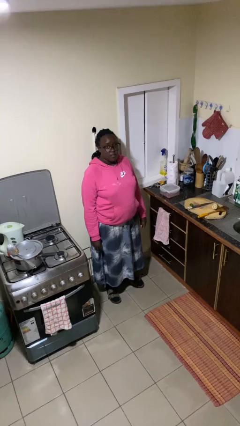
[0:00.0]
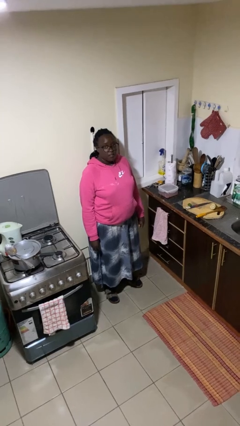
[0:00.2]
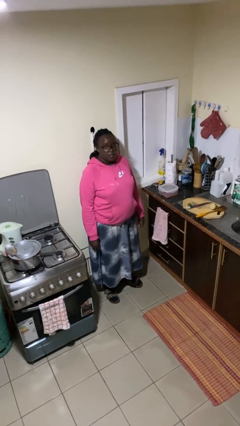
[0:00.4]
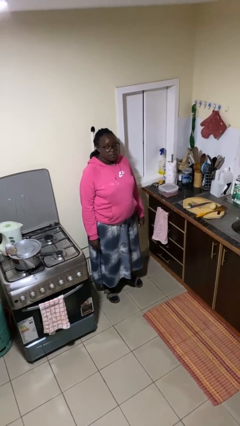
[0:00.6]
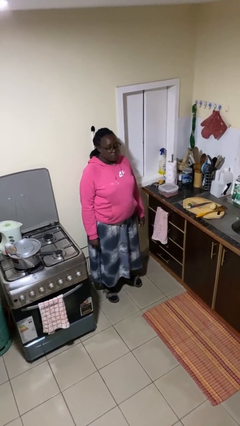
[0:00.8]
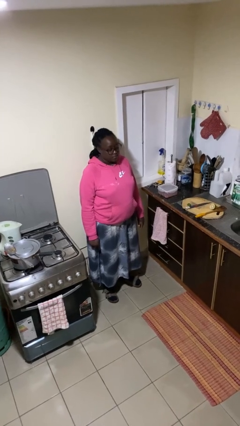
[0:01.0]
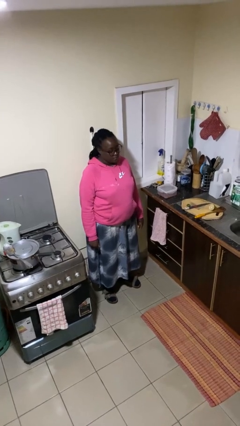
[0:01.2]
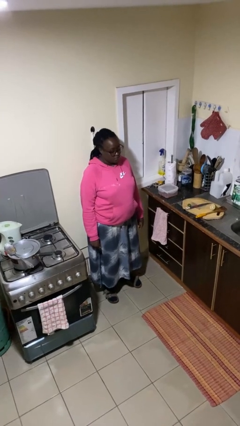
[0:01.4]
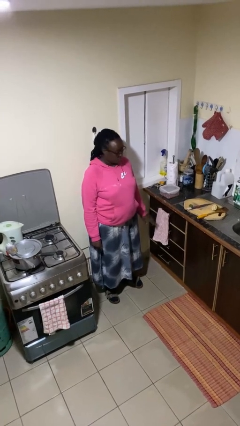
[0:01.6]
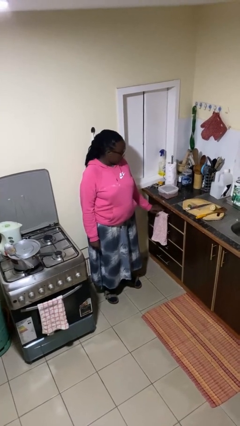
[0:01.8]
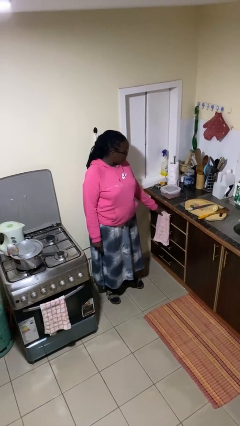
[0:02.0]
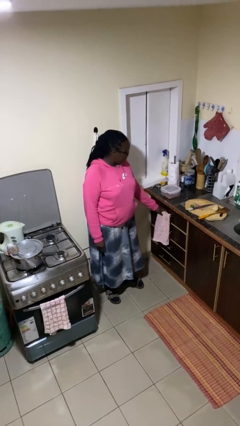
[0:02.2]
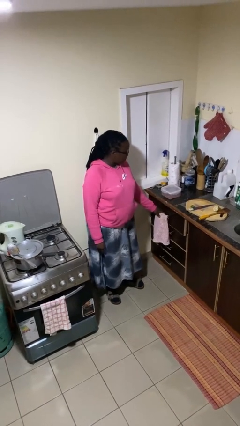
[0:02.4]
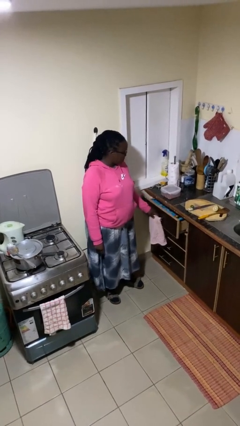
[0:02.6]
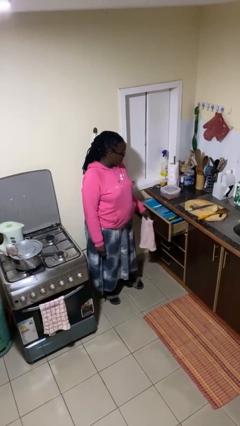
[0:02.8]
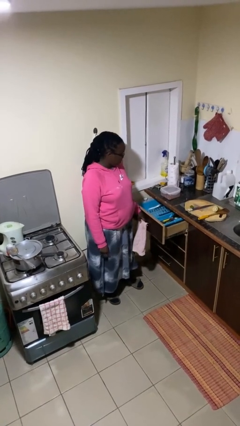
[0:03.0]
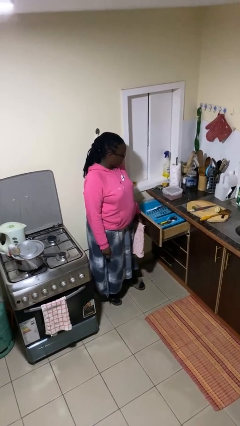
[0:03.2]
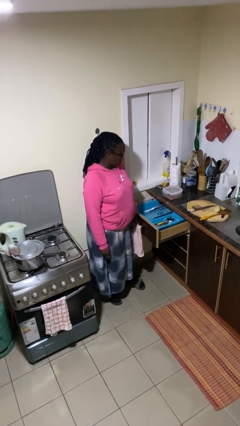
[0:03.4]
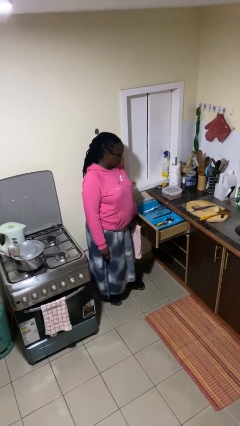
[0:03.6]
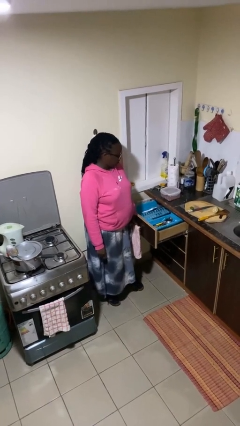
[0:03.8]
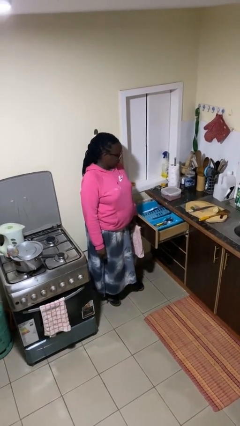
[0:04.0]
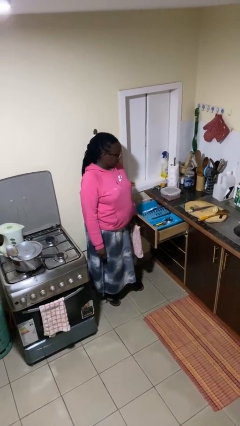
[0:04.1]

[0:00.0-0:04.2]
person opens kitchen drawer

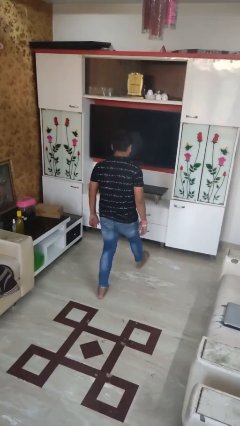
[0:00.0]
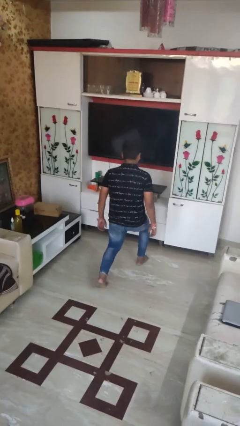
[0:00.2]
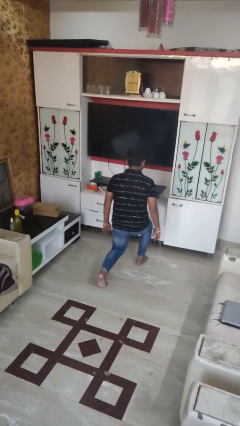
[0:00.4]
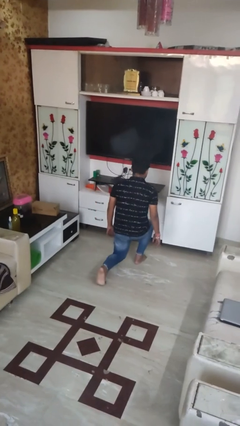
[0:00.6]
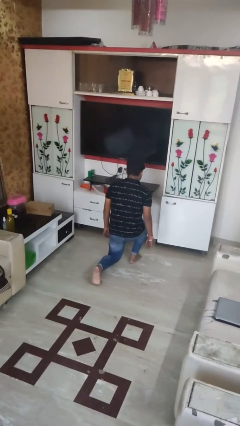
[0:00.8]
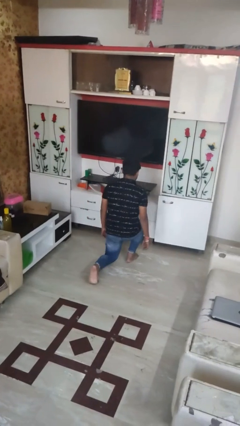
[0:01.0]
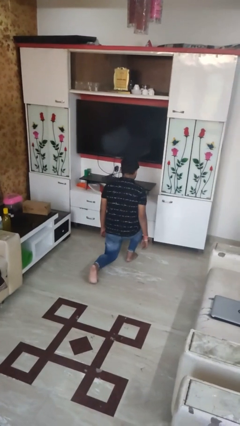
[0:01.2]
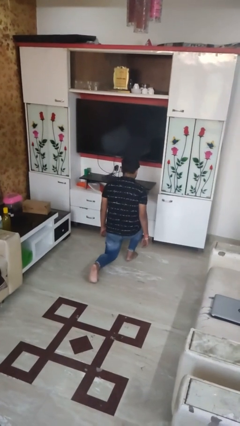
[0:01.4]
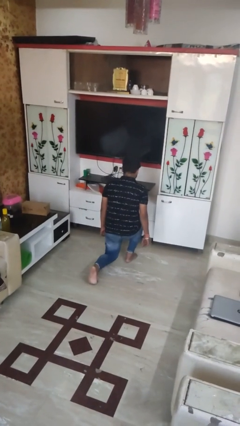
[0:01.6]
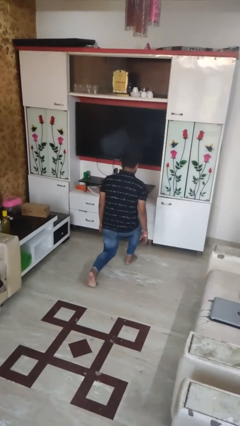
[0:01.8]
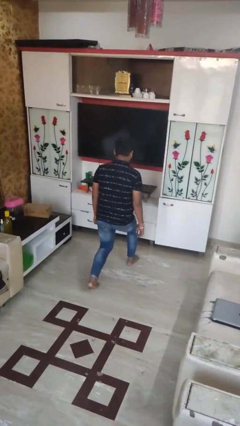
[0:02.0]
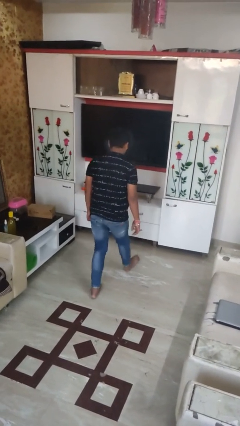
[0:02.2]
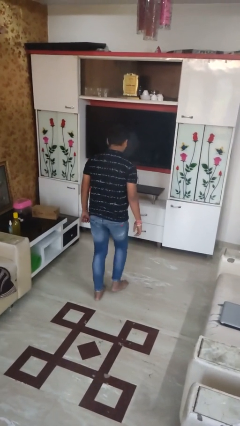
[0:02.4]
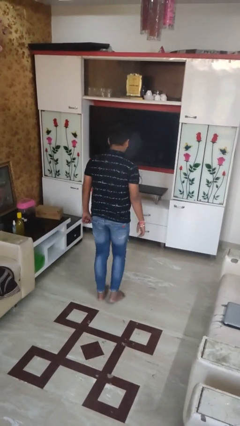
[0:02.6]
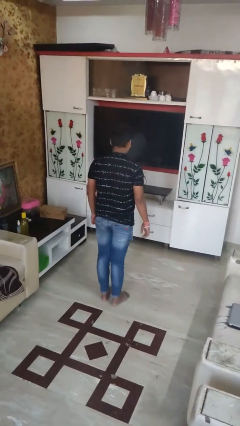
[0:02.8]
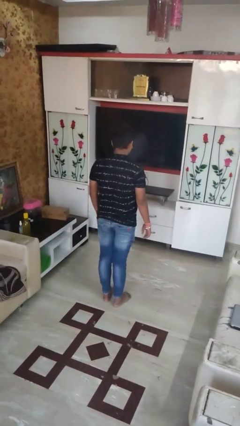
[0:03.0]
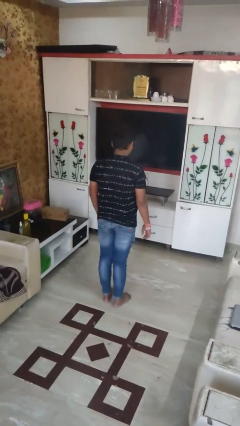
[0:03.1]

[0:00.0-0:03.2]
person exercises with lunges

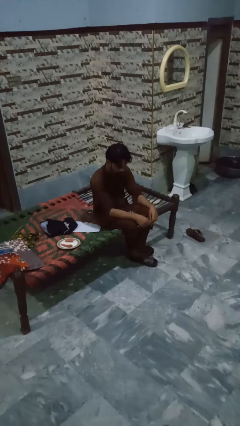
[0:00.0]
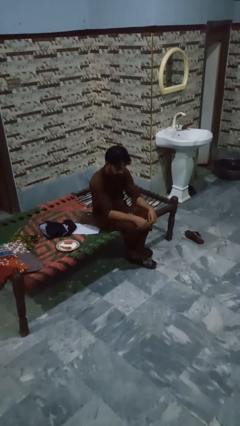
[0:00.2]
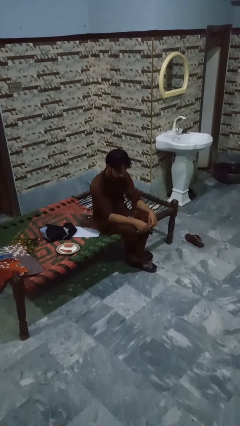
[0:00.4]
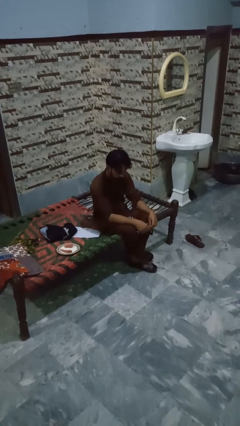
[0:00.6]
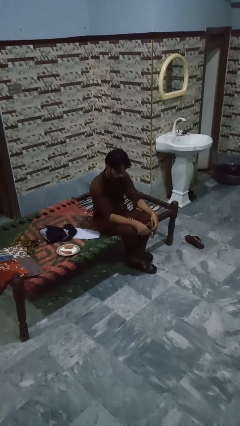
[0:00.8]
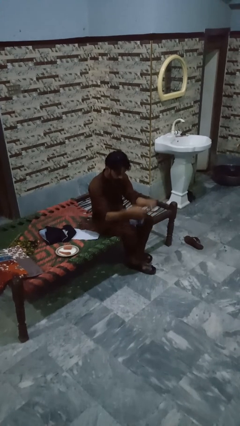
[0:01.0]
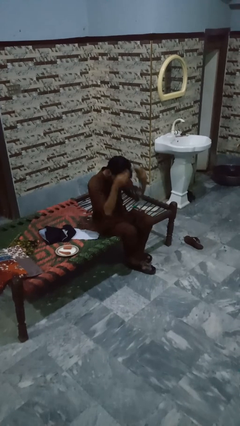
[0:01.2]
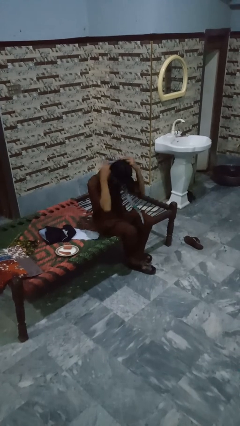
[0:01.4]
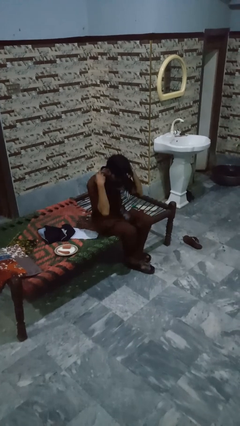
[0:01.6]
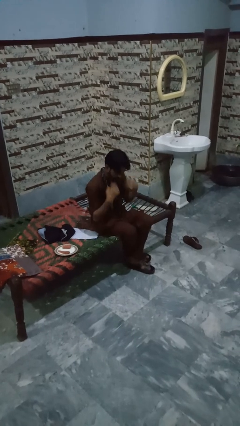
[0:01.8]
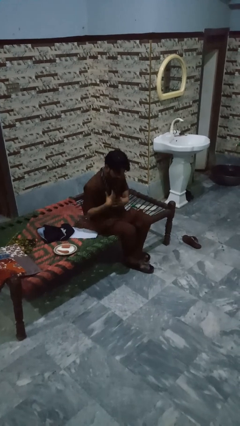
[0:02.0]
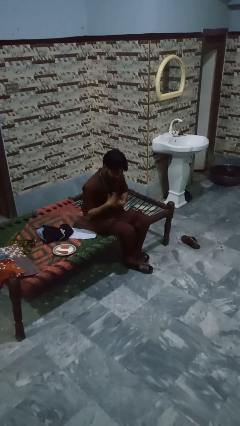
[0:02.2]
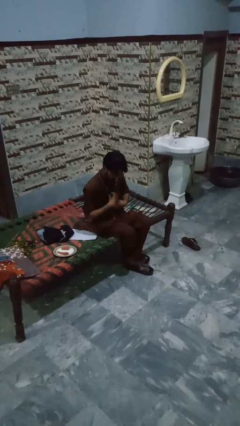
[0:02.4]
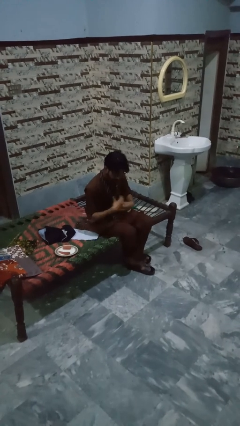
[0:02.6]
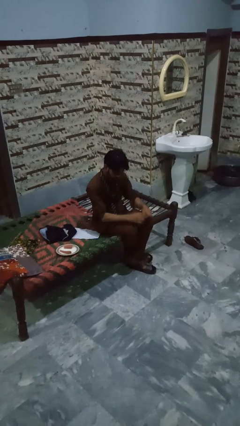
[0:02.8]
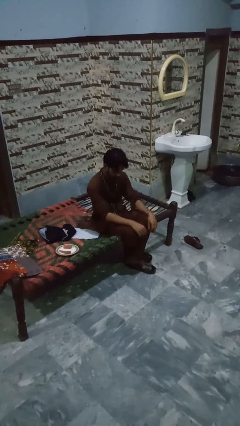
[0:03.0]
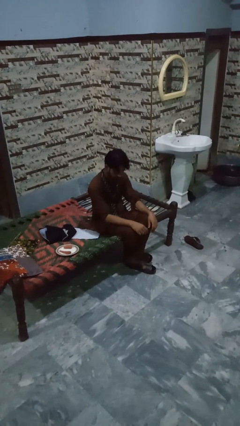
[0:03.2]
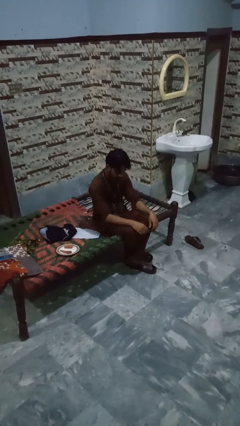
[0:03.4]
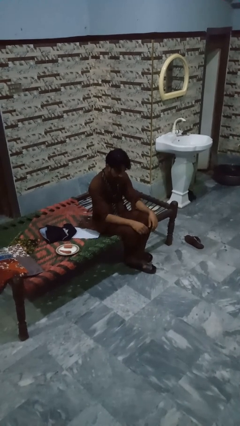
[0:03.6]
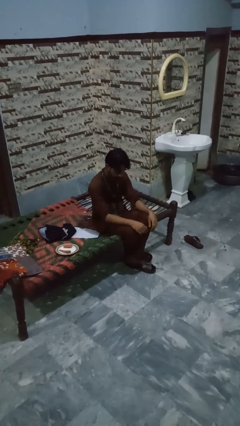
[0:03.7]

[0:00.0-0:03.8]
person puts on necktie

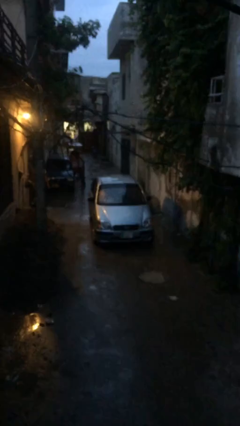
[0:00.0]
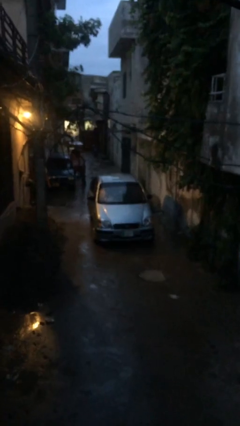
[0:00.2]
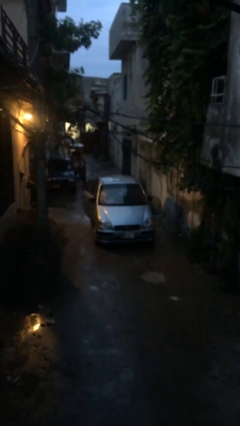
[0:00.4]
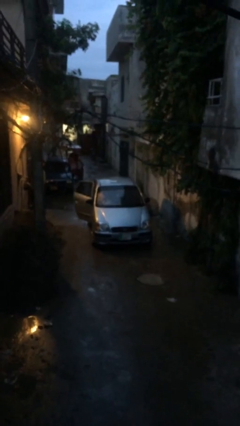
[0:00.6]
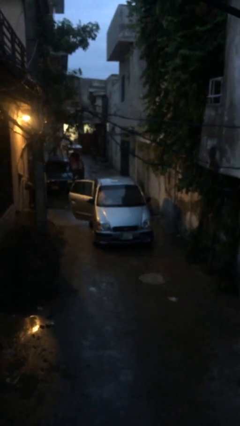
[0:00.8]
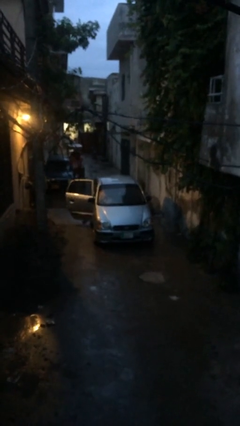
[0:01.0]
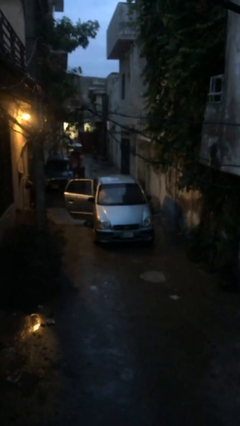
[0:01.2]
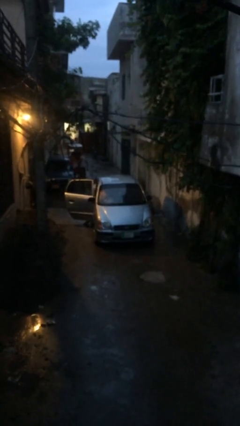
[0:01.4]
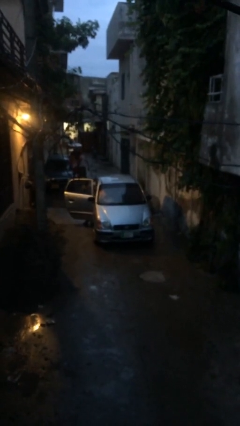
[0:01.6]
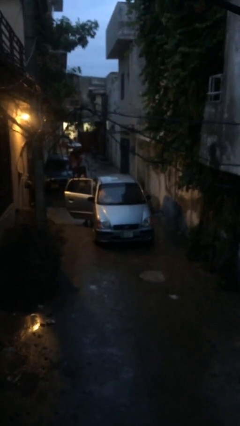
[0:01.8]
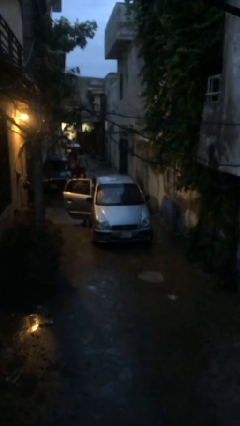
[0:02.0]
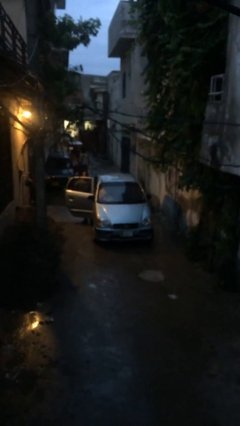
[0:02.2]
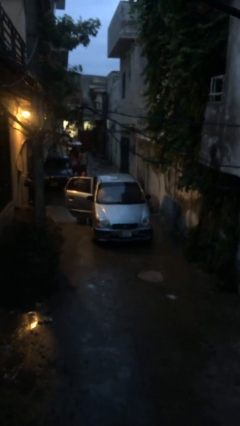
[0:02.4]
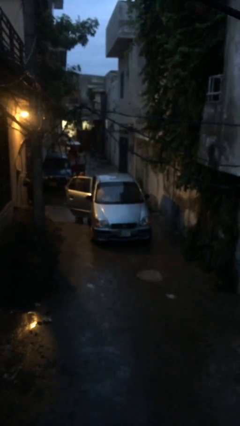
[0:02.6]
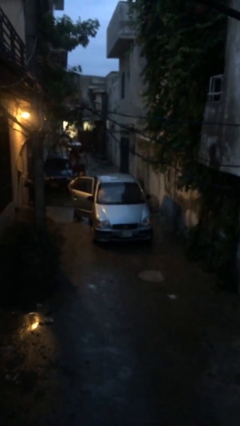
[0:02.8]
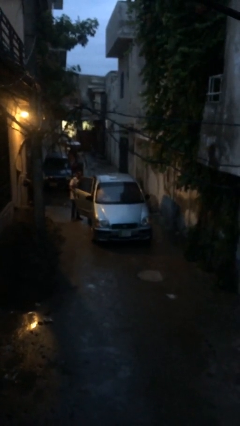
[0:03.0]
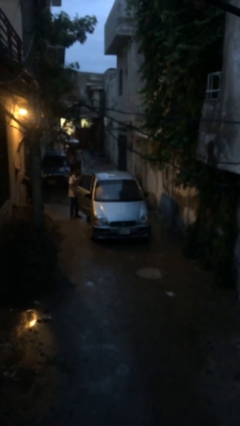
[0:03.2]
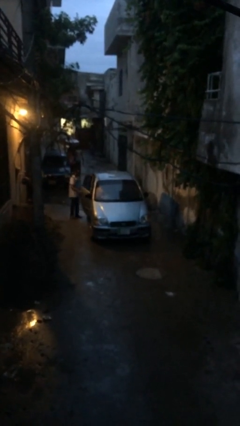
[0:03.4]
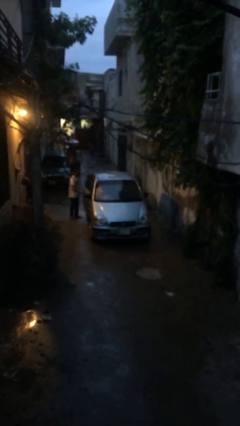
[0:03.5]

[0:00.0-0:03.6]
car drops off person

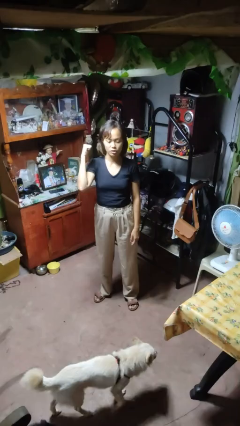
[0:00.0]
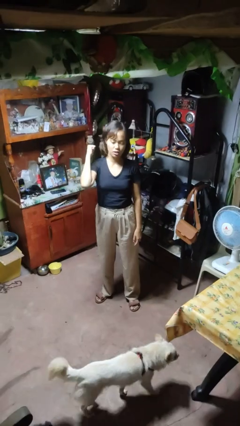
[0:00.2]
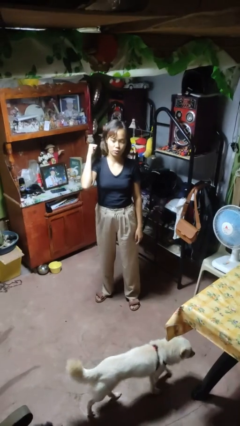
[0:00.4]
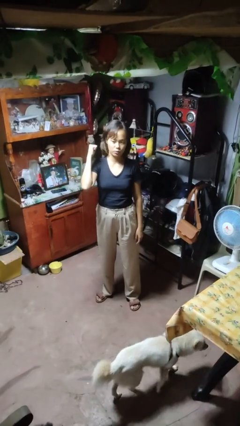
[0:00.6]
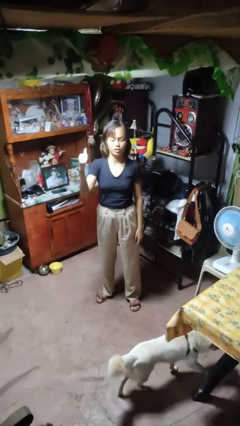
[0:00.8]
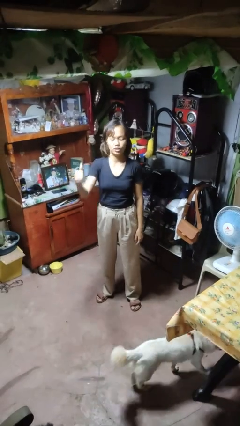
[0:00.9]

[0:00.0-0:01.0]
person gestures behind me

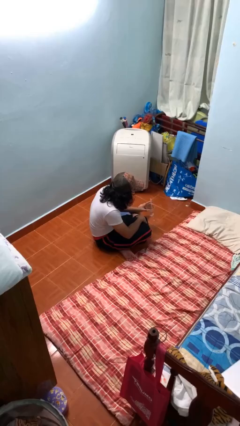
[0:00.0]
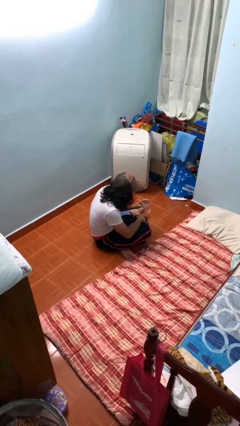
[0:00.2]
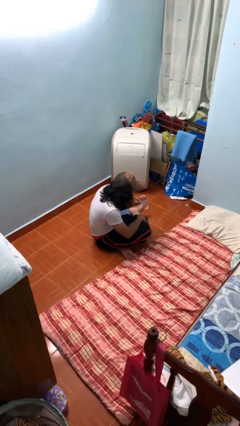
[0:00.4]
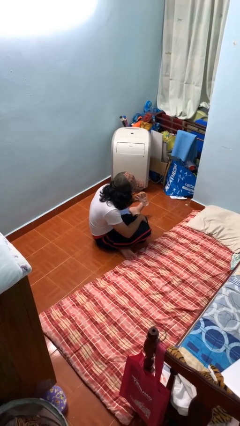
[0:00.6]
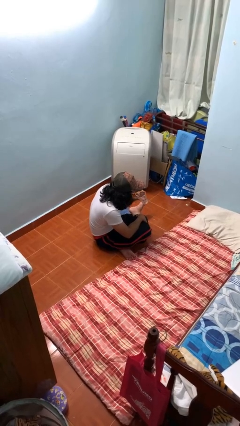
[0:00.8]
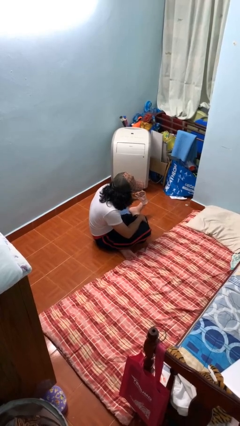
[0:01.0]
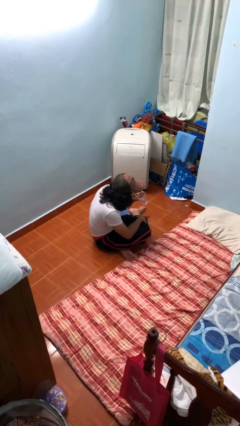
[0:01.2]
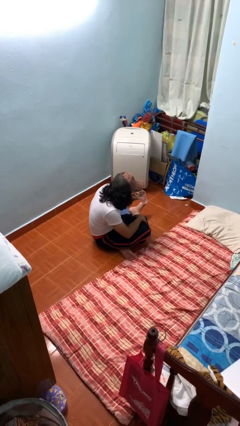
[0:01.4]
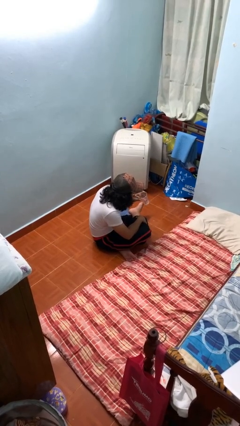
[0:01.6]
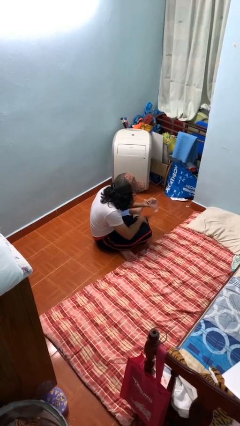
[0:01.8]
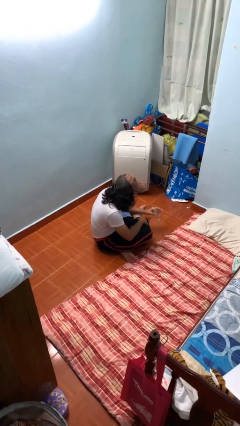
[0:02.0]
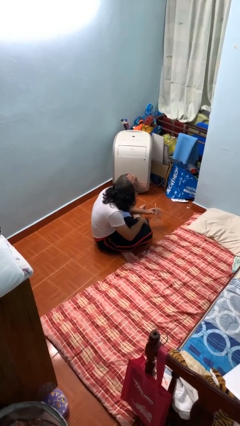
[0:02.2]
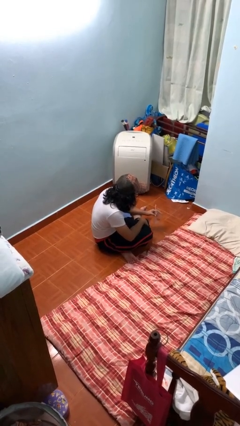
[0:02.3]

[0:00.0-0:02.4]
person drinks from straw
